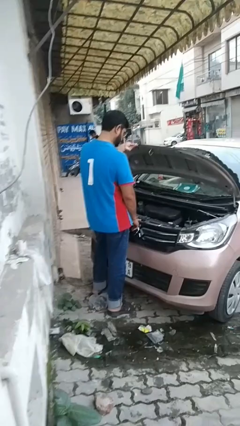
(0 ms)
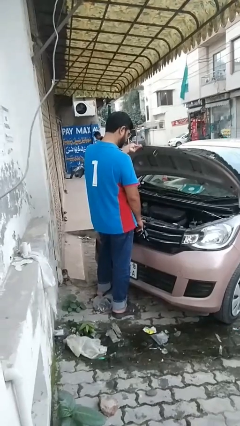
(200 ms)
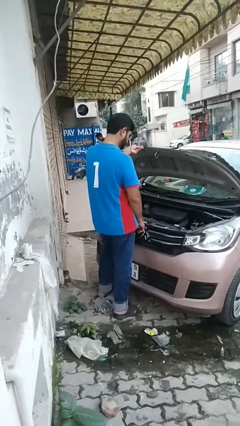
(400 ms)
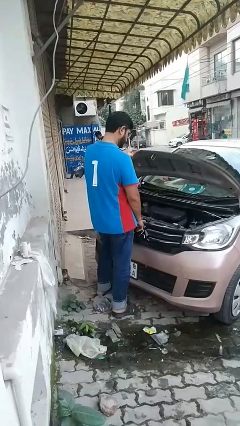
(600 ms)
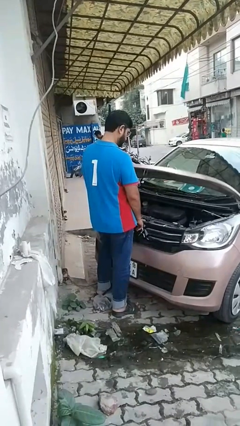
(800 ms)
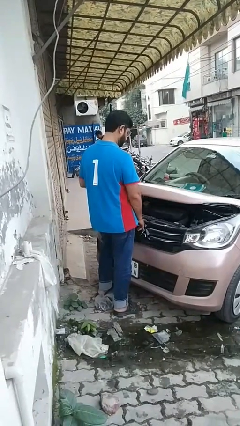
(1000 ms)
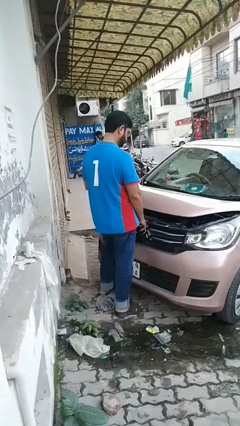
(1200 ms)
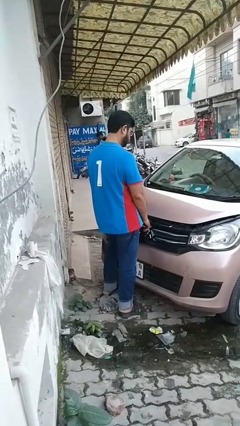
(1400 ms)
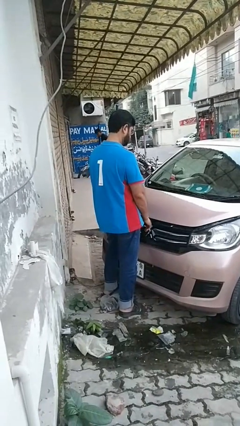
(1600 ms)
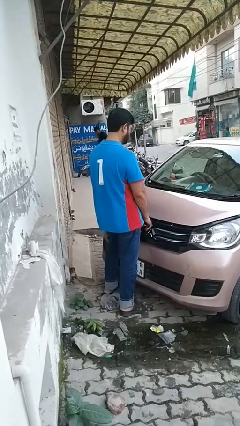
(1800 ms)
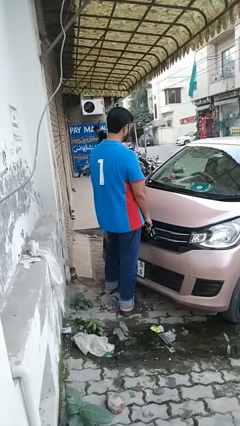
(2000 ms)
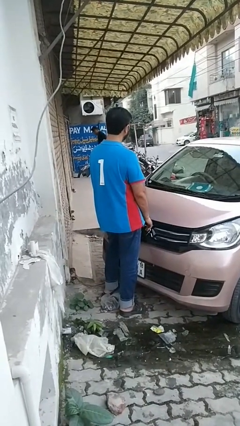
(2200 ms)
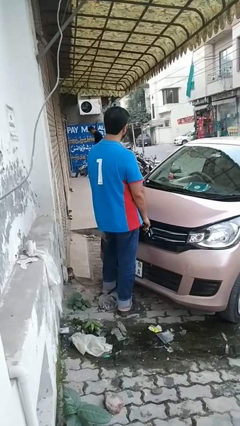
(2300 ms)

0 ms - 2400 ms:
person closes car hood

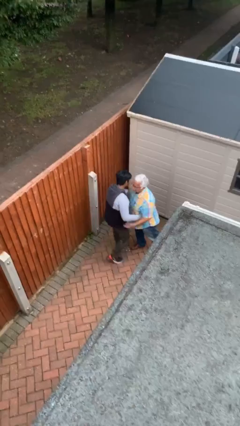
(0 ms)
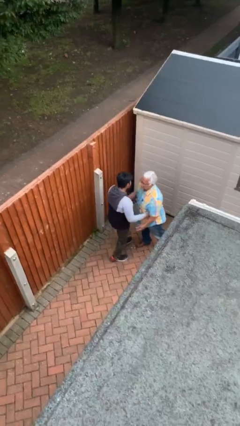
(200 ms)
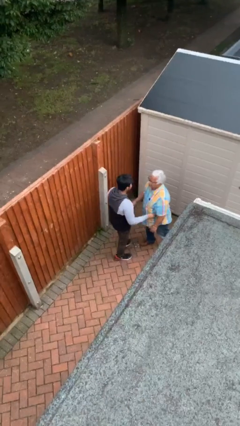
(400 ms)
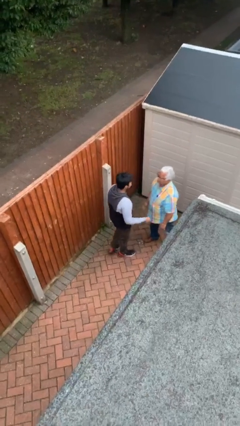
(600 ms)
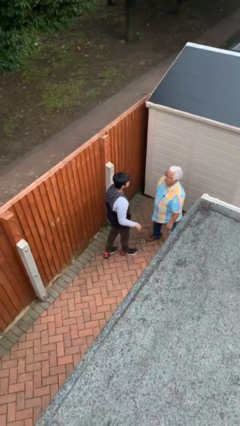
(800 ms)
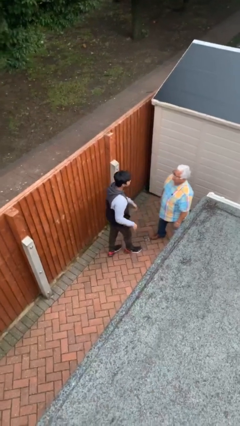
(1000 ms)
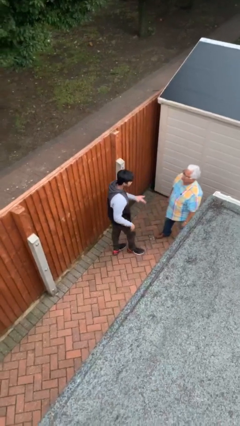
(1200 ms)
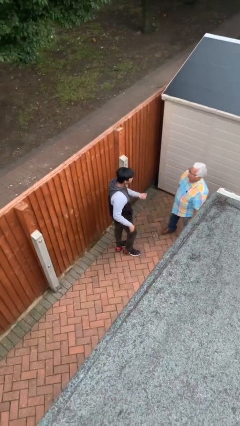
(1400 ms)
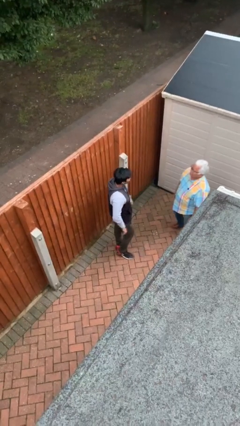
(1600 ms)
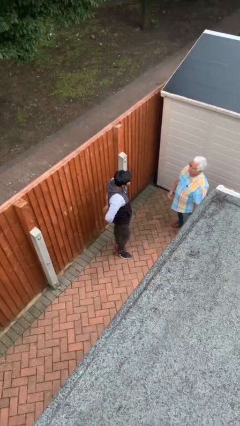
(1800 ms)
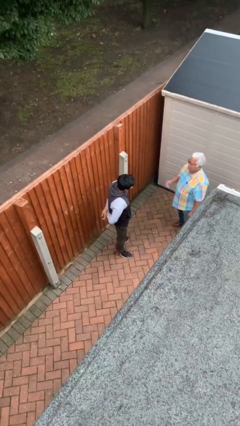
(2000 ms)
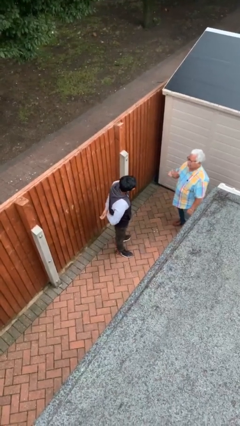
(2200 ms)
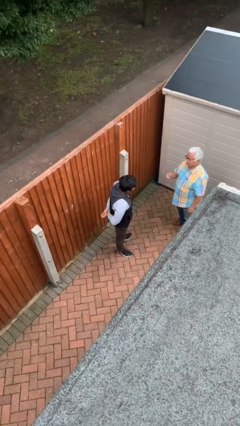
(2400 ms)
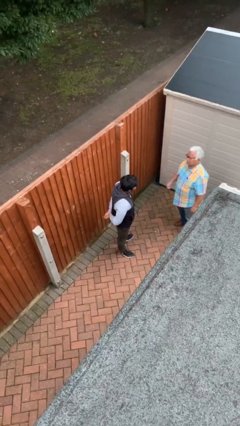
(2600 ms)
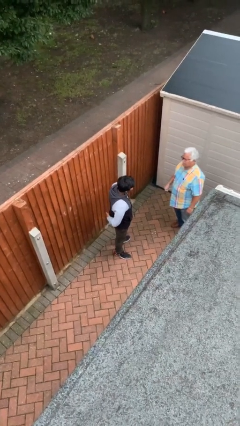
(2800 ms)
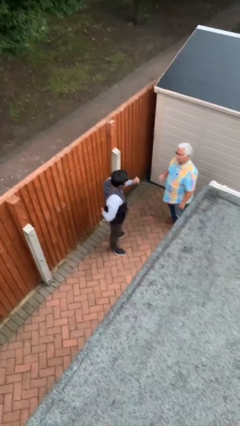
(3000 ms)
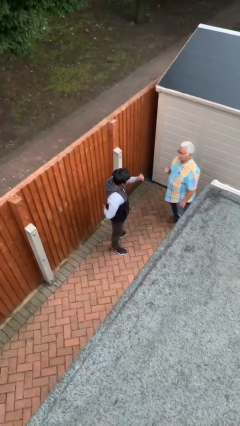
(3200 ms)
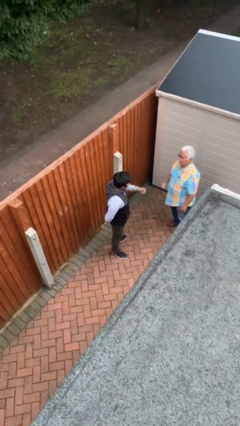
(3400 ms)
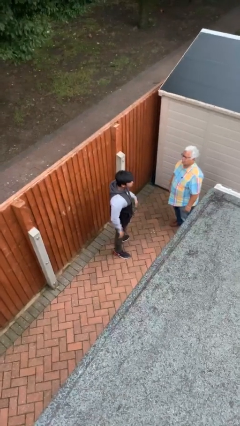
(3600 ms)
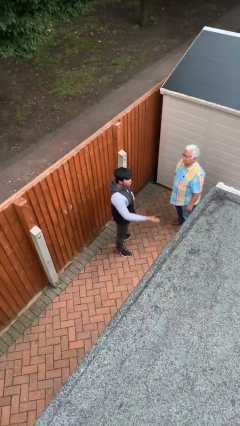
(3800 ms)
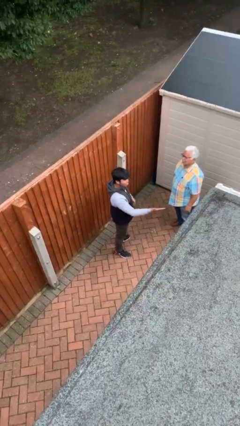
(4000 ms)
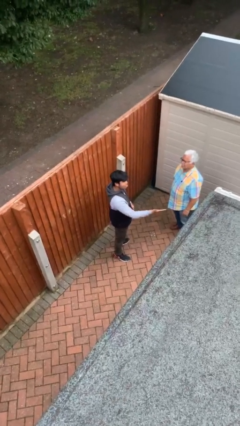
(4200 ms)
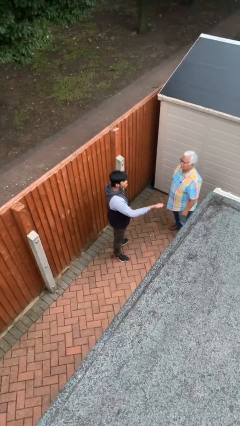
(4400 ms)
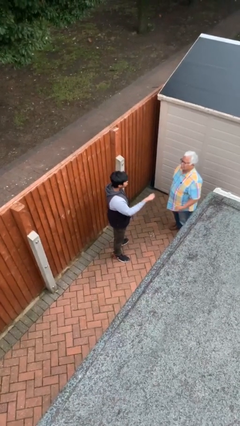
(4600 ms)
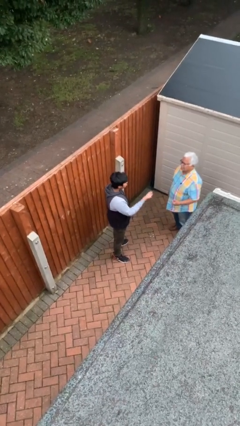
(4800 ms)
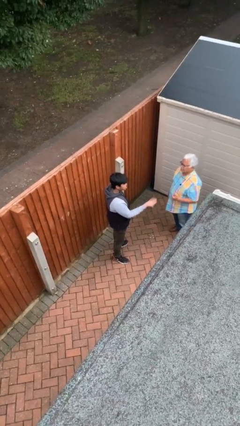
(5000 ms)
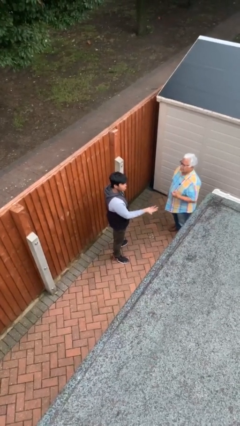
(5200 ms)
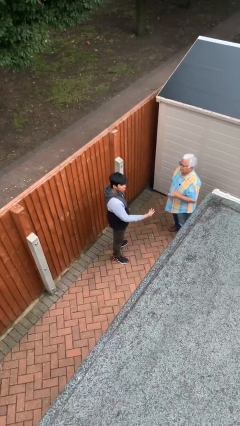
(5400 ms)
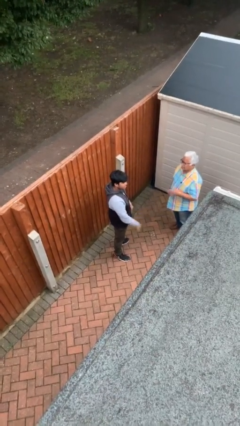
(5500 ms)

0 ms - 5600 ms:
person talks to person

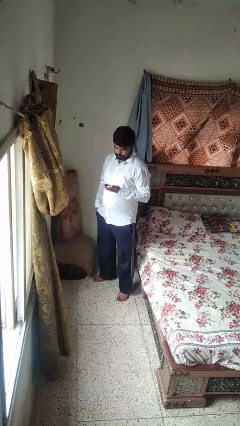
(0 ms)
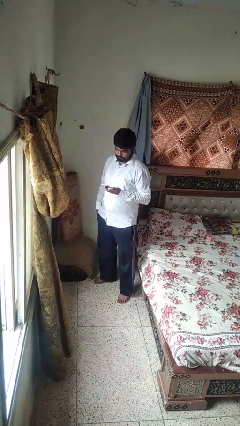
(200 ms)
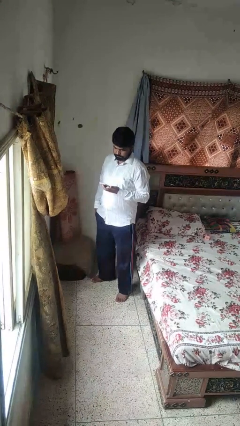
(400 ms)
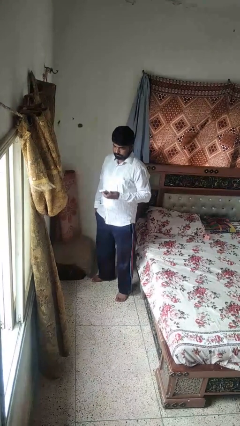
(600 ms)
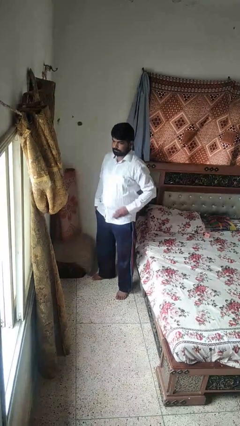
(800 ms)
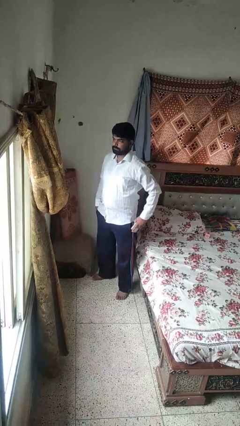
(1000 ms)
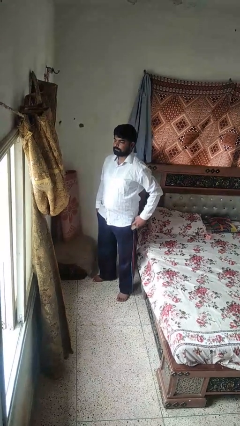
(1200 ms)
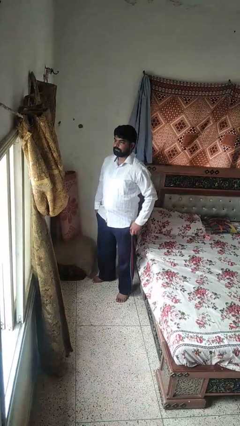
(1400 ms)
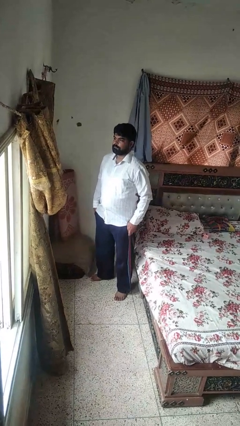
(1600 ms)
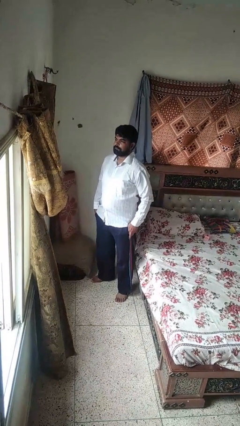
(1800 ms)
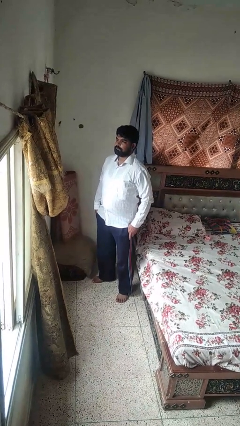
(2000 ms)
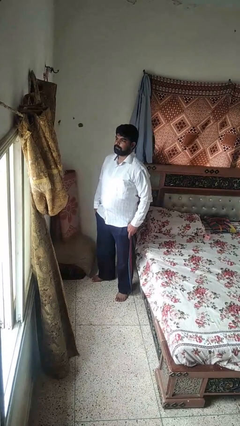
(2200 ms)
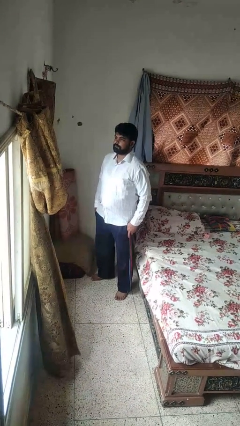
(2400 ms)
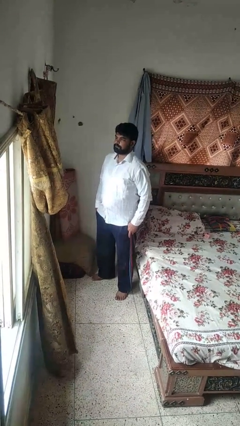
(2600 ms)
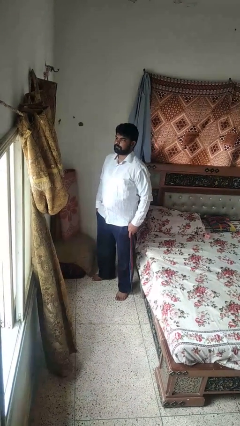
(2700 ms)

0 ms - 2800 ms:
person puts phone into pocket

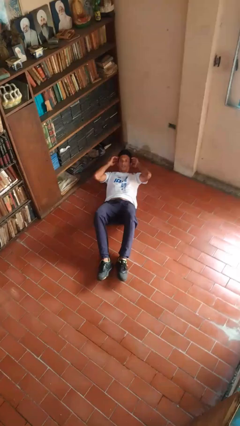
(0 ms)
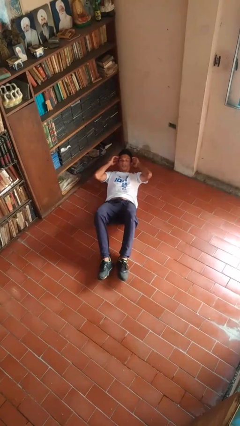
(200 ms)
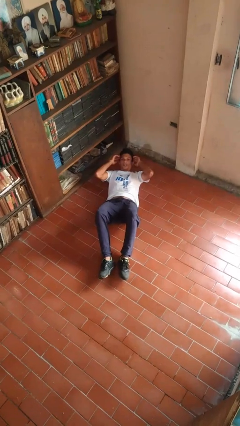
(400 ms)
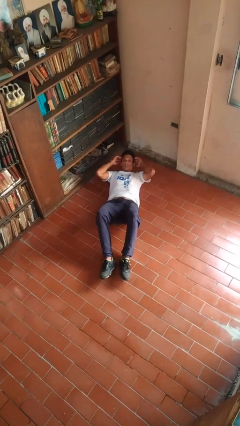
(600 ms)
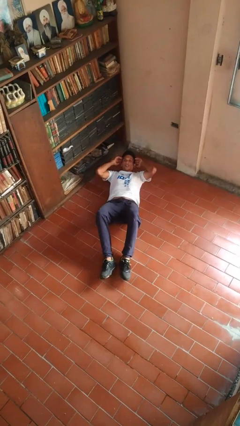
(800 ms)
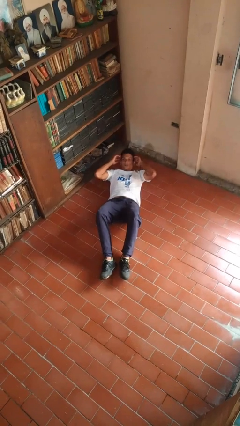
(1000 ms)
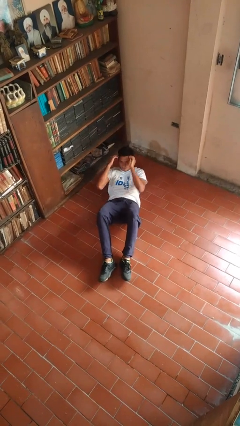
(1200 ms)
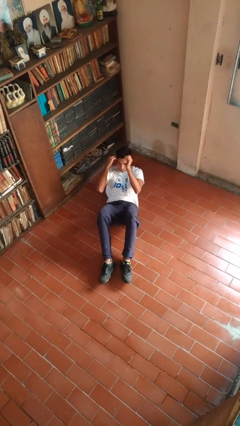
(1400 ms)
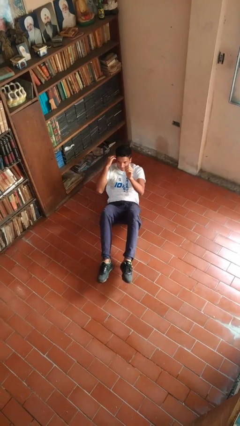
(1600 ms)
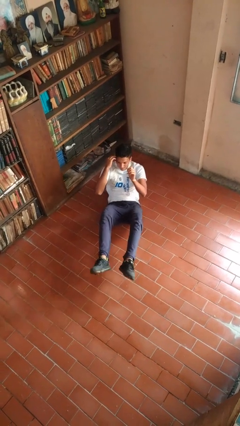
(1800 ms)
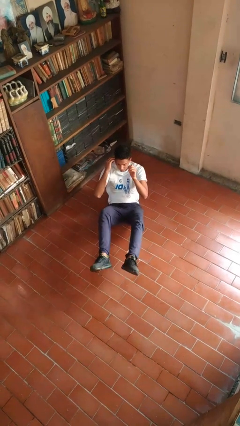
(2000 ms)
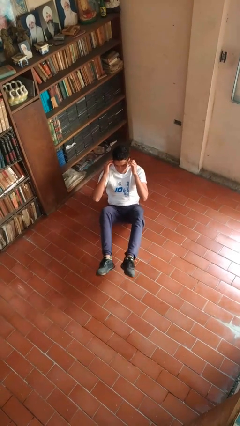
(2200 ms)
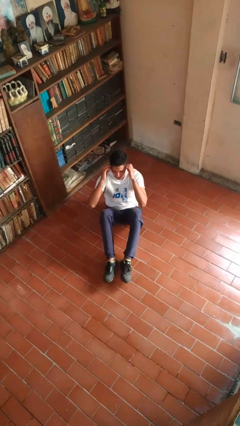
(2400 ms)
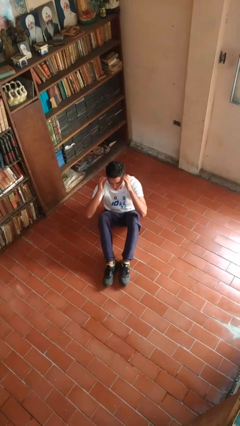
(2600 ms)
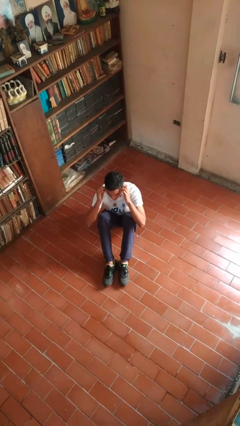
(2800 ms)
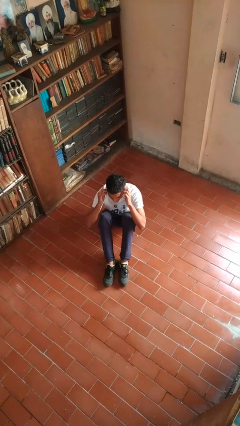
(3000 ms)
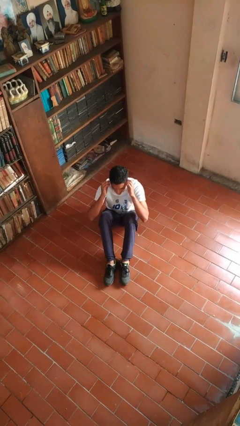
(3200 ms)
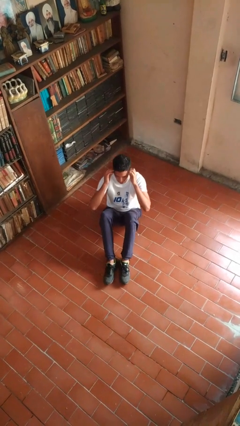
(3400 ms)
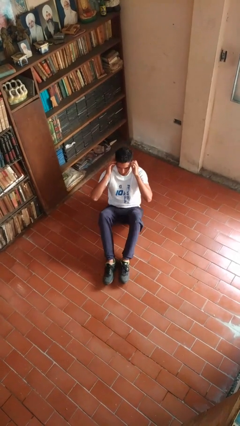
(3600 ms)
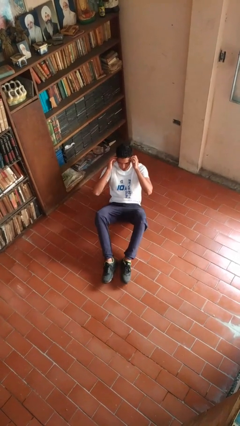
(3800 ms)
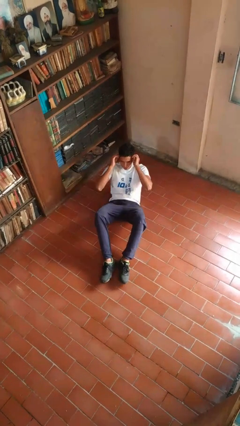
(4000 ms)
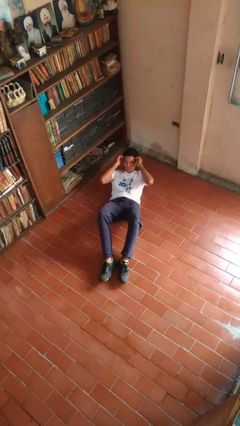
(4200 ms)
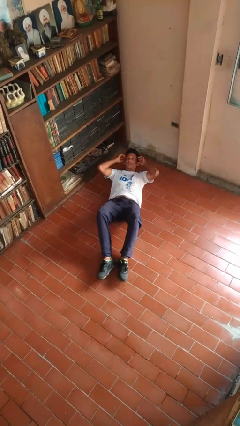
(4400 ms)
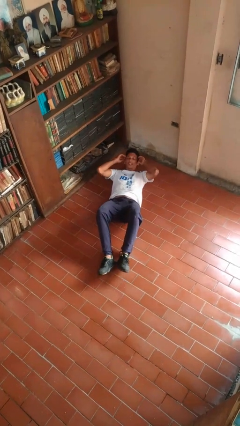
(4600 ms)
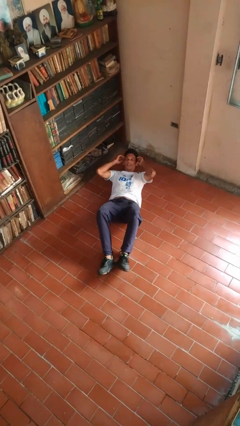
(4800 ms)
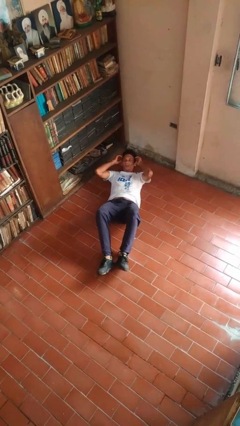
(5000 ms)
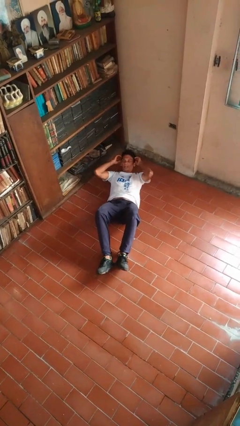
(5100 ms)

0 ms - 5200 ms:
person exercises with situp

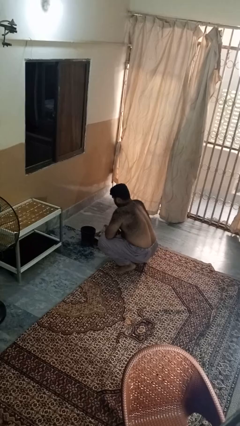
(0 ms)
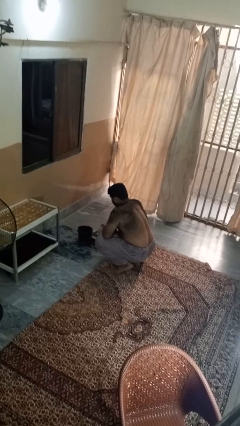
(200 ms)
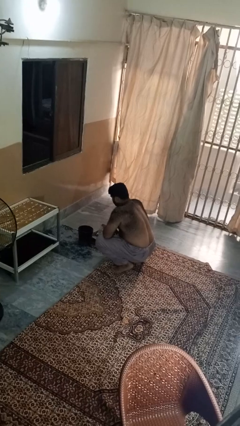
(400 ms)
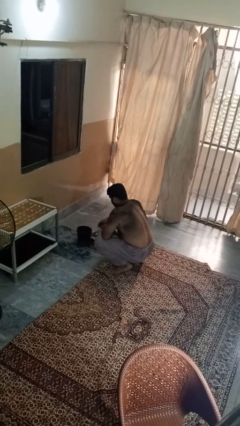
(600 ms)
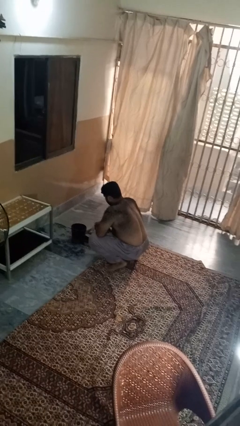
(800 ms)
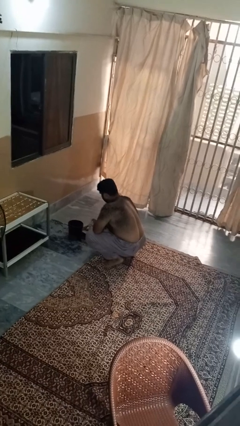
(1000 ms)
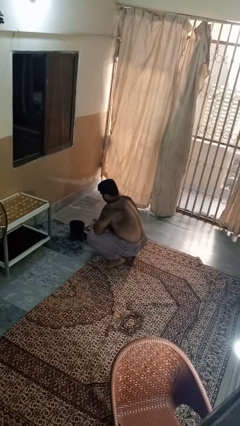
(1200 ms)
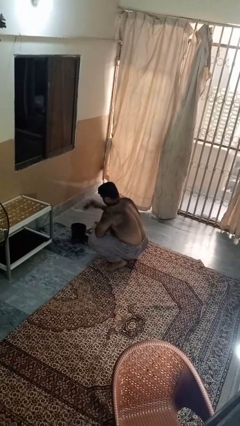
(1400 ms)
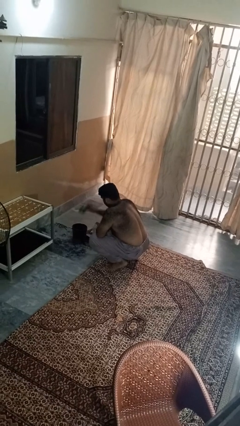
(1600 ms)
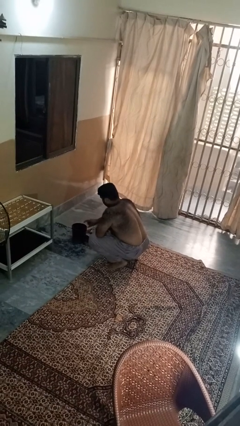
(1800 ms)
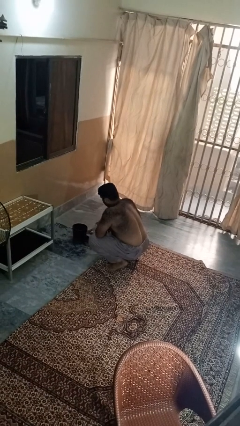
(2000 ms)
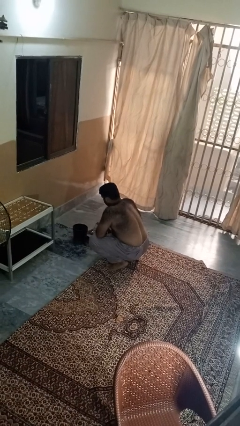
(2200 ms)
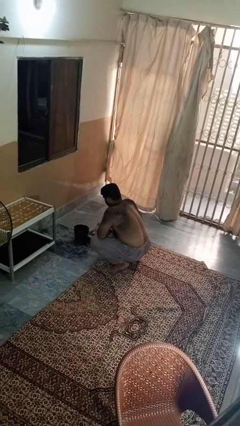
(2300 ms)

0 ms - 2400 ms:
person discards trash
